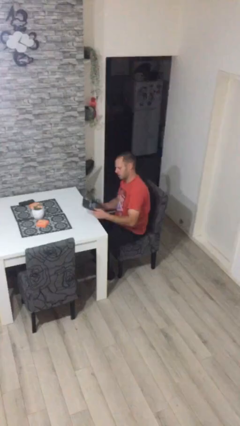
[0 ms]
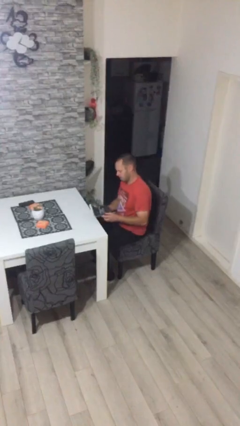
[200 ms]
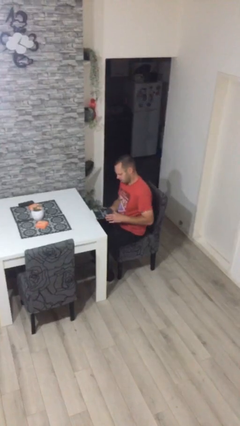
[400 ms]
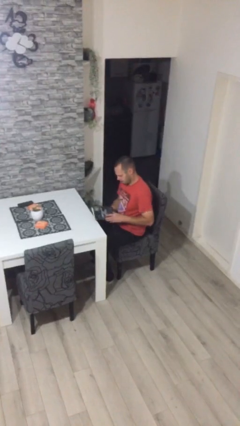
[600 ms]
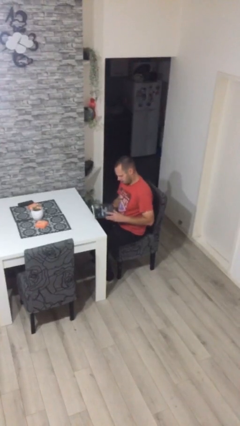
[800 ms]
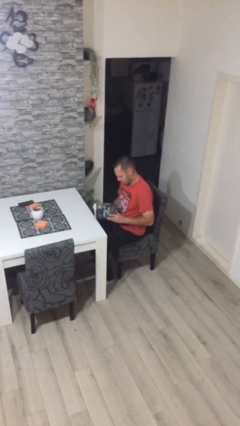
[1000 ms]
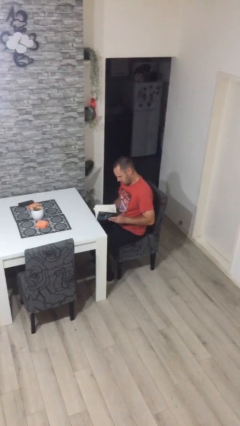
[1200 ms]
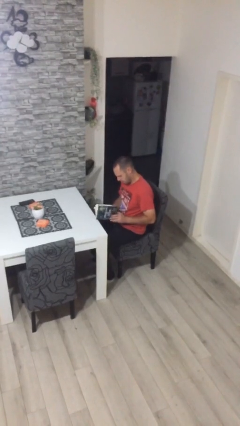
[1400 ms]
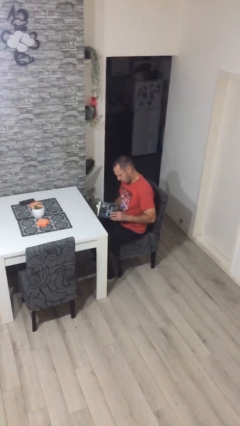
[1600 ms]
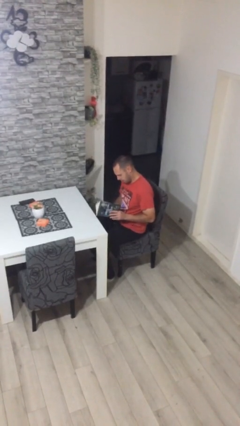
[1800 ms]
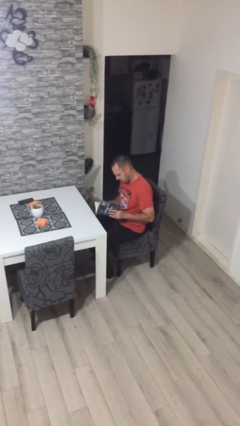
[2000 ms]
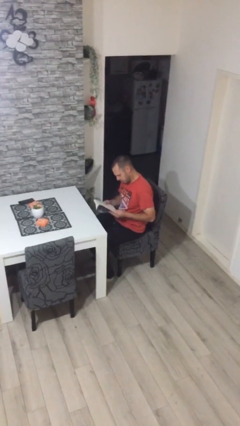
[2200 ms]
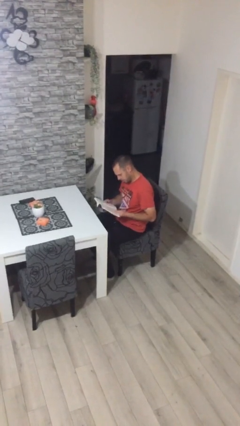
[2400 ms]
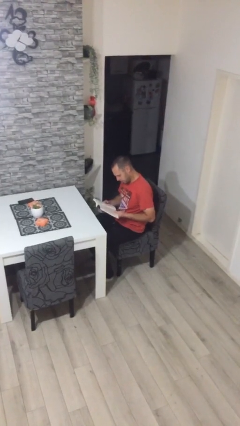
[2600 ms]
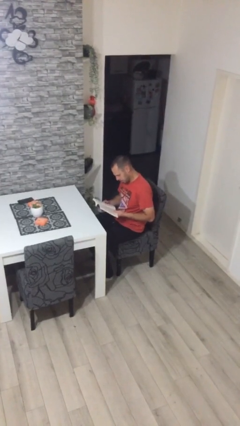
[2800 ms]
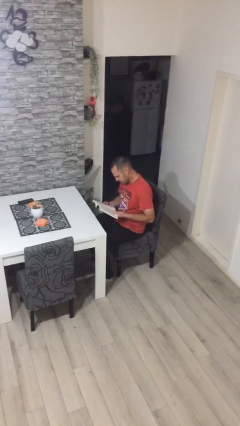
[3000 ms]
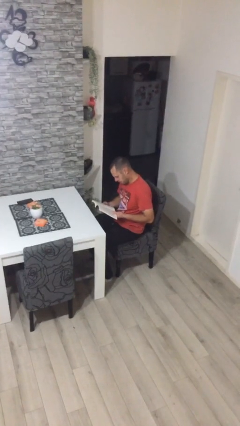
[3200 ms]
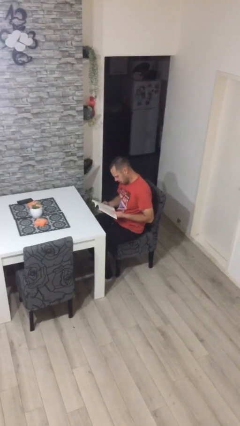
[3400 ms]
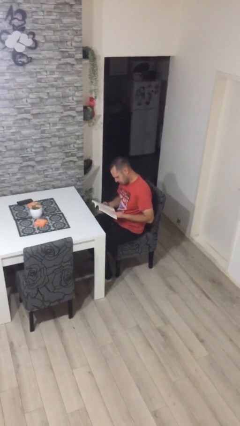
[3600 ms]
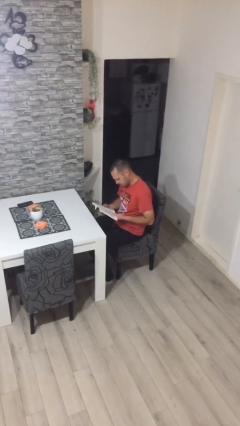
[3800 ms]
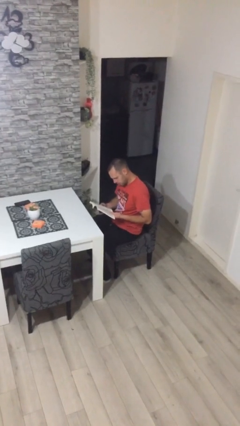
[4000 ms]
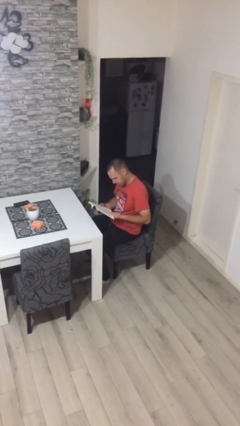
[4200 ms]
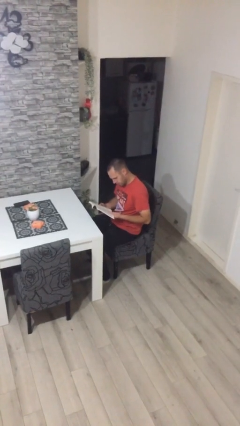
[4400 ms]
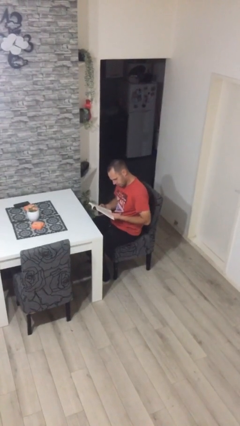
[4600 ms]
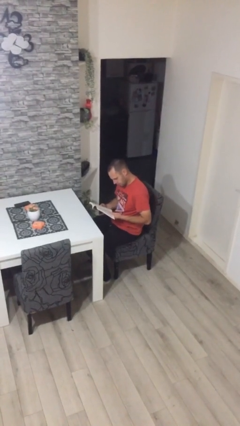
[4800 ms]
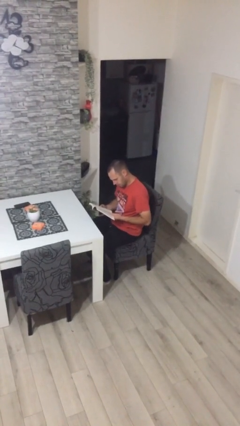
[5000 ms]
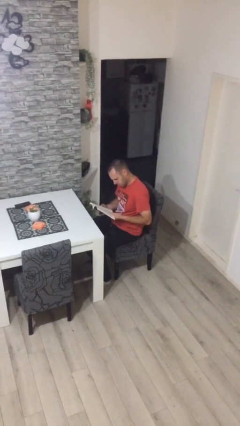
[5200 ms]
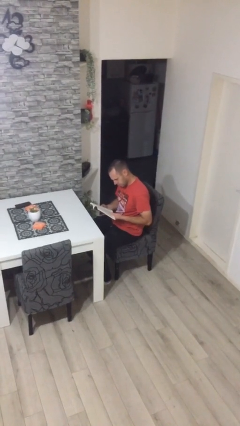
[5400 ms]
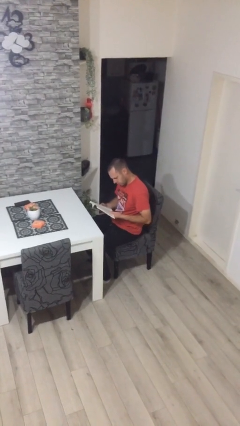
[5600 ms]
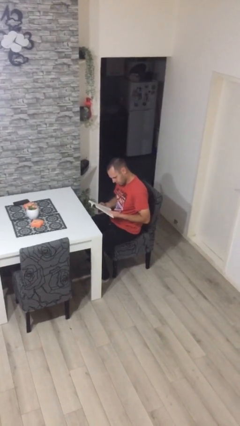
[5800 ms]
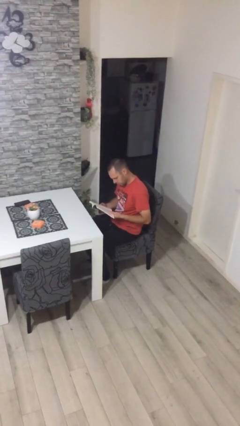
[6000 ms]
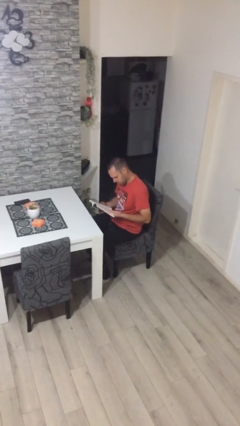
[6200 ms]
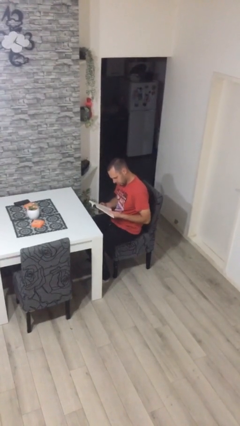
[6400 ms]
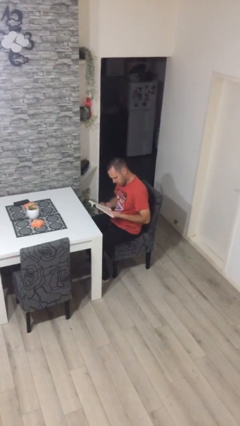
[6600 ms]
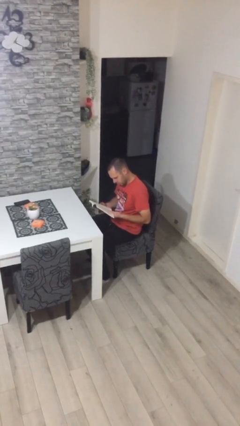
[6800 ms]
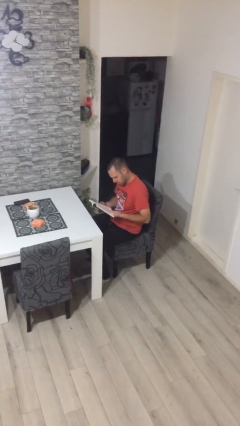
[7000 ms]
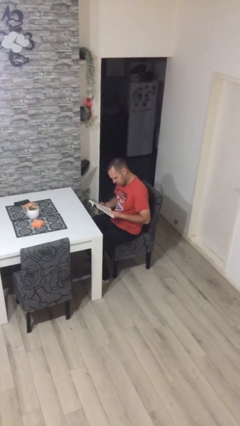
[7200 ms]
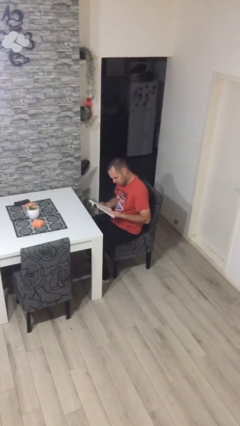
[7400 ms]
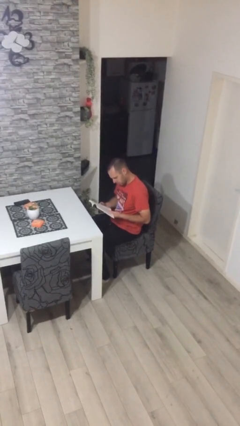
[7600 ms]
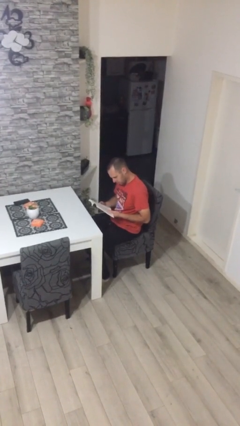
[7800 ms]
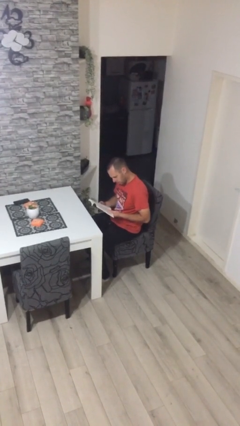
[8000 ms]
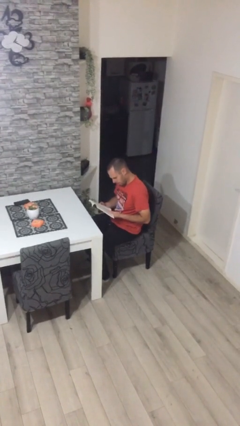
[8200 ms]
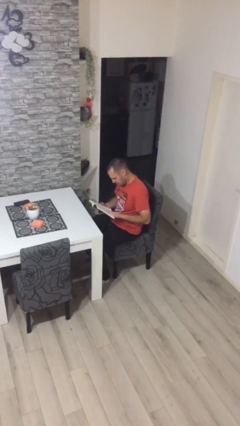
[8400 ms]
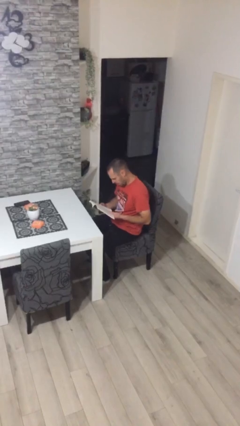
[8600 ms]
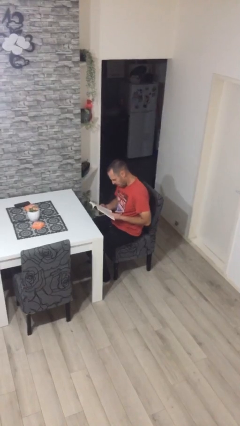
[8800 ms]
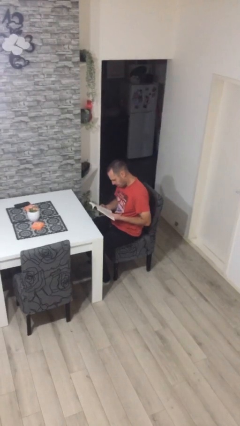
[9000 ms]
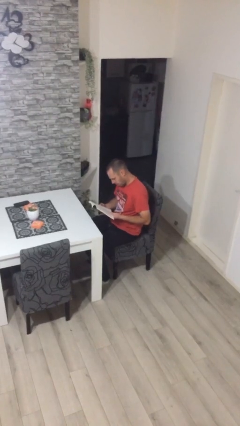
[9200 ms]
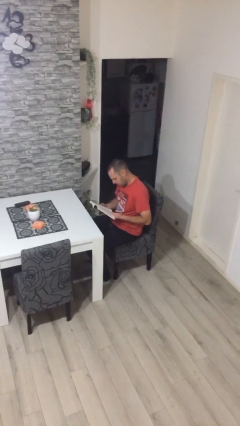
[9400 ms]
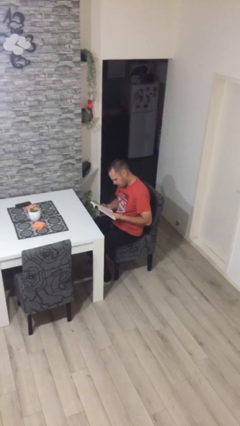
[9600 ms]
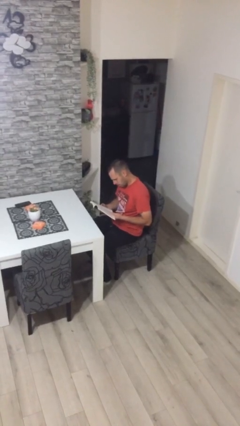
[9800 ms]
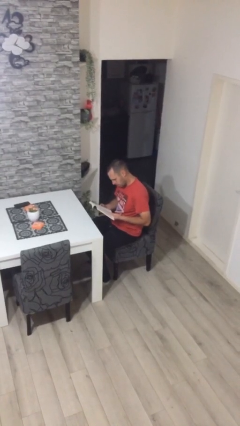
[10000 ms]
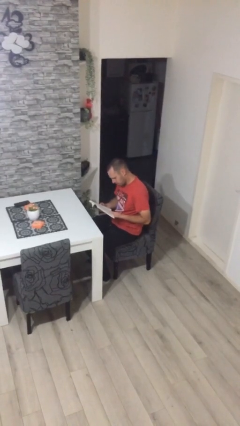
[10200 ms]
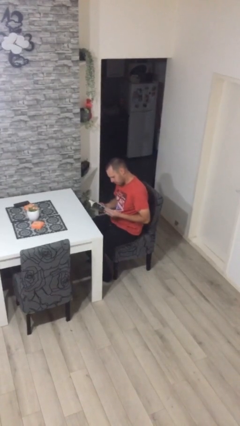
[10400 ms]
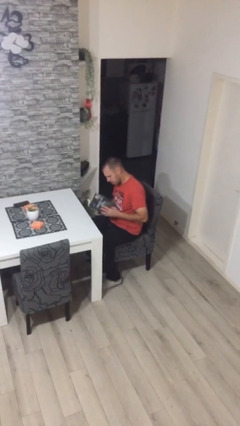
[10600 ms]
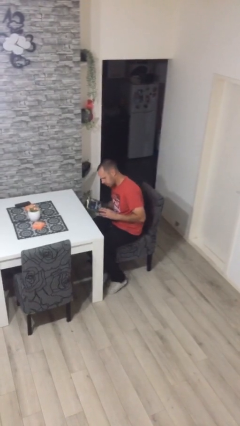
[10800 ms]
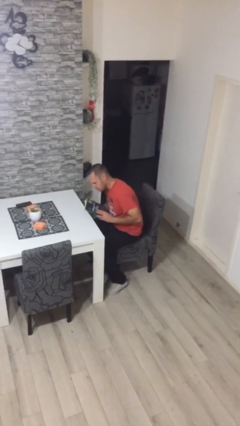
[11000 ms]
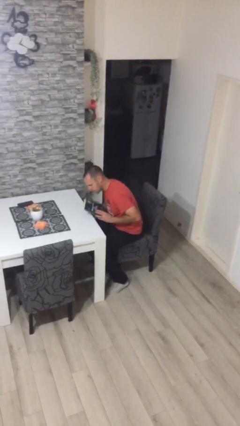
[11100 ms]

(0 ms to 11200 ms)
person reads document

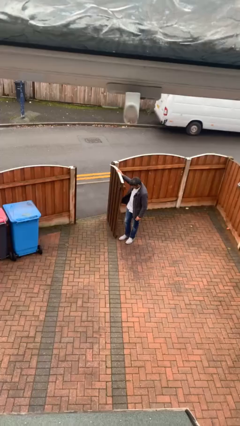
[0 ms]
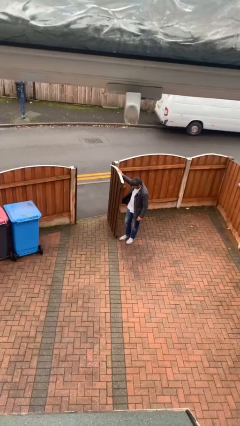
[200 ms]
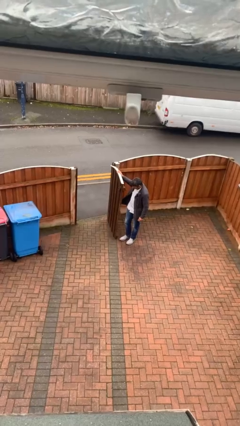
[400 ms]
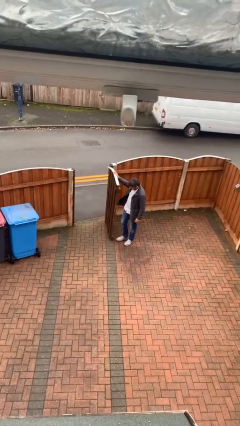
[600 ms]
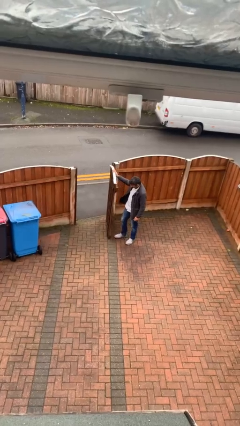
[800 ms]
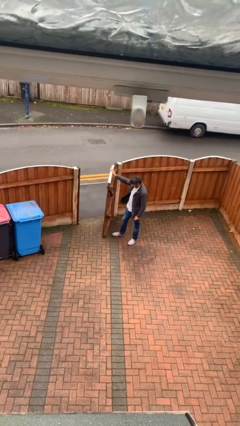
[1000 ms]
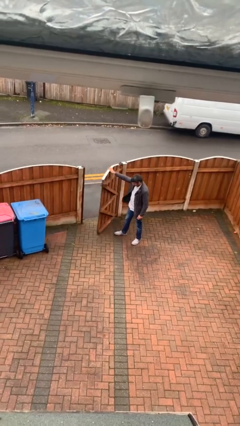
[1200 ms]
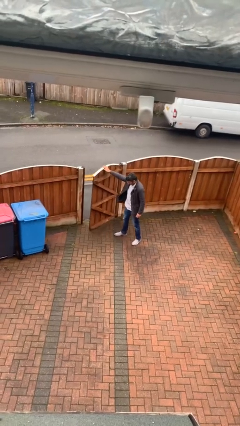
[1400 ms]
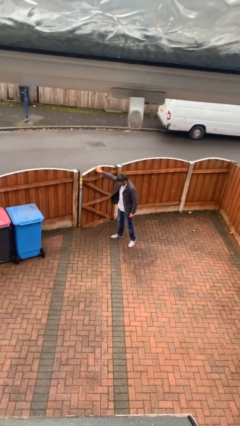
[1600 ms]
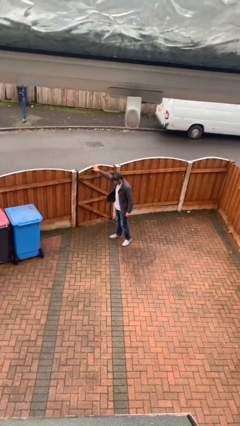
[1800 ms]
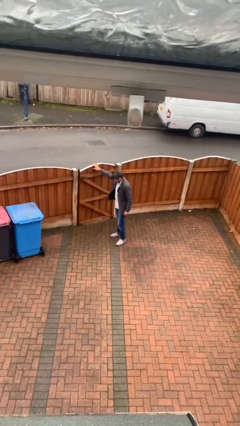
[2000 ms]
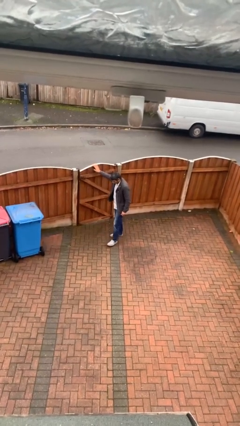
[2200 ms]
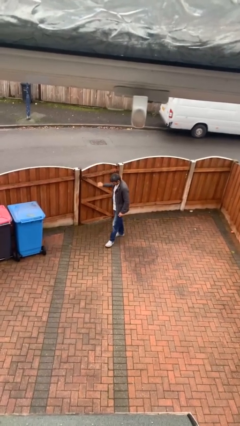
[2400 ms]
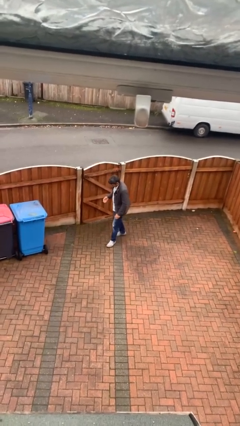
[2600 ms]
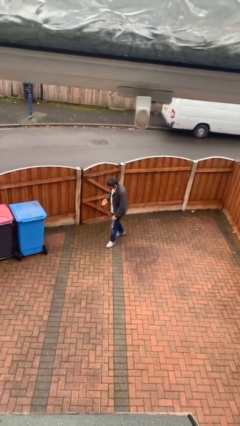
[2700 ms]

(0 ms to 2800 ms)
person closes facility door

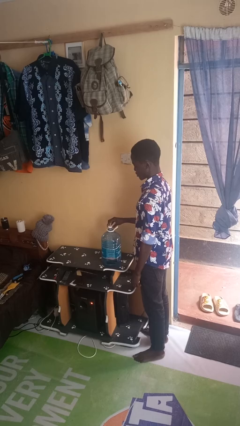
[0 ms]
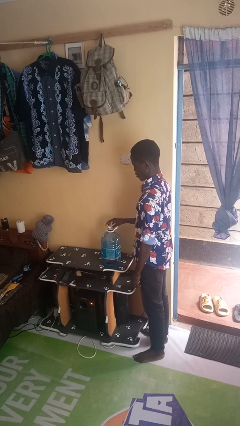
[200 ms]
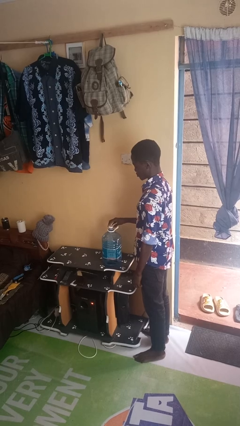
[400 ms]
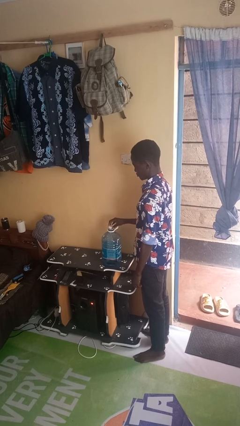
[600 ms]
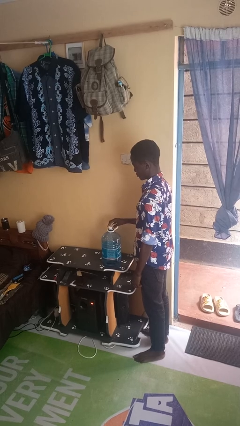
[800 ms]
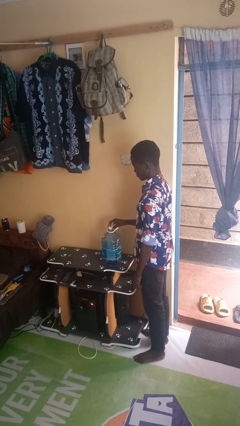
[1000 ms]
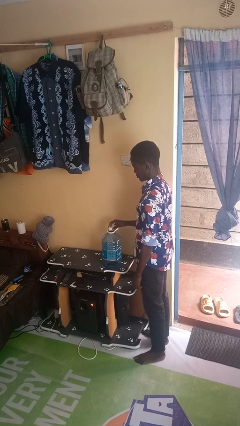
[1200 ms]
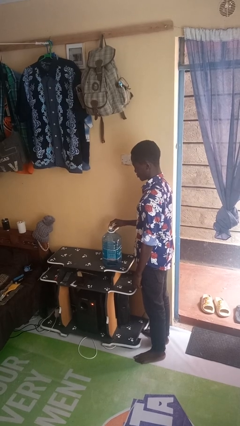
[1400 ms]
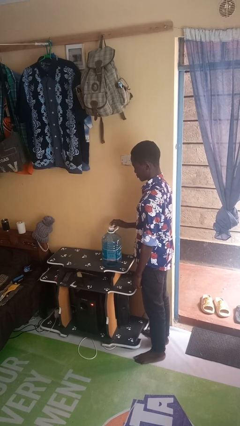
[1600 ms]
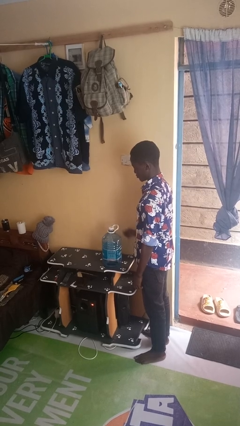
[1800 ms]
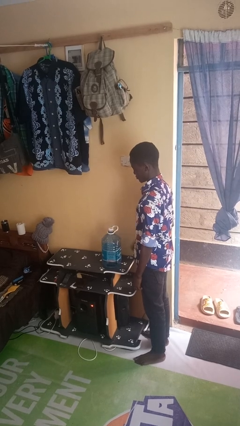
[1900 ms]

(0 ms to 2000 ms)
person screws lid to bottle

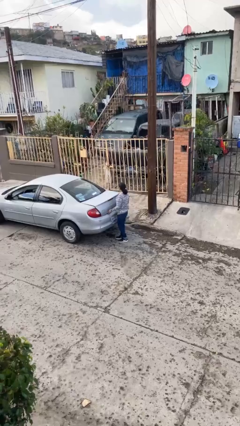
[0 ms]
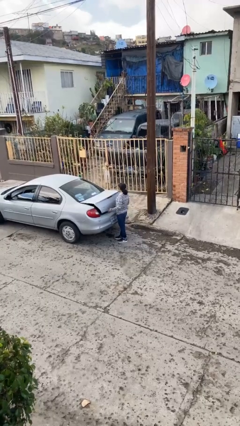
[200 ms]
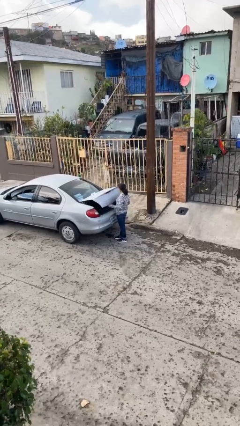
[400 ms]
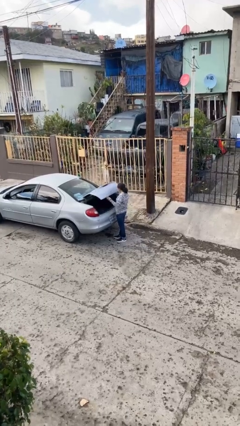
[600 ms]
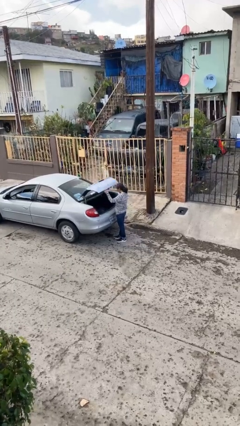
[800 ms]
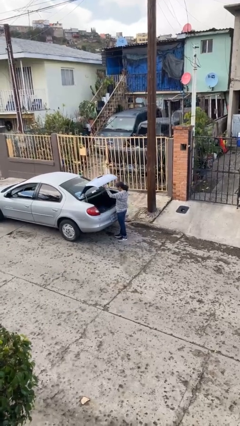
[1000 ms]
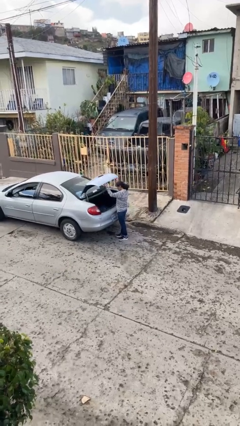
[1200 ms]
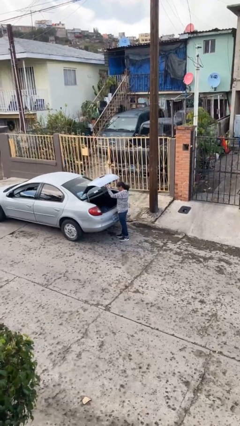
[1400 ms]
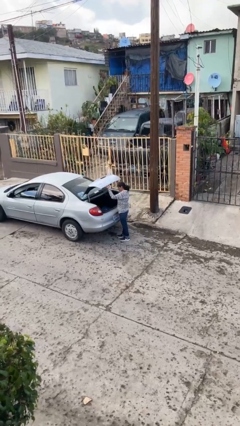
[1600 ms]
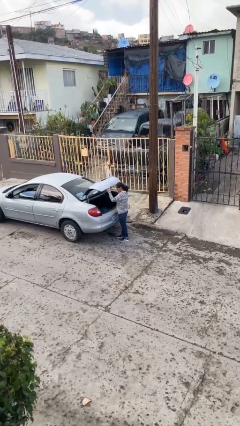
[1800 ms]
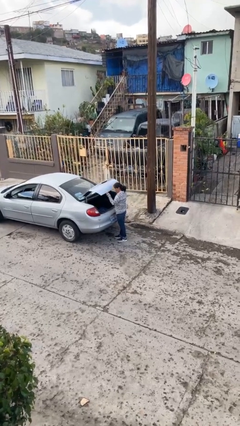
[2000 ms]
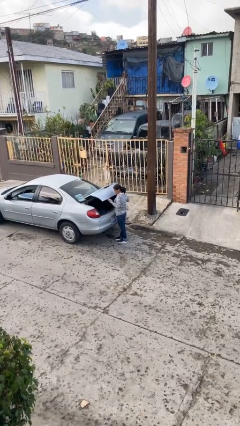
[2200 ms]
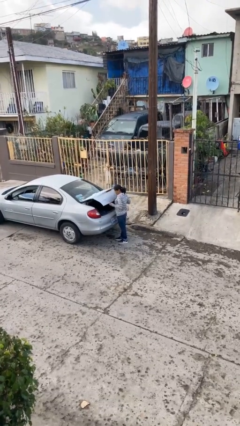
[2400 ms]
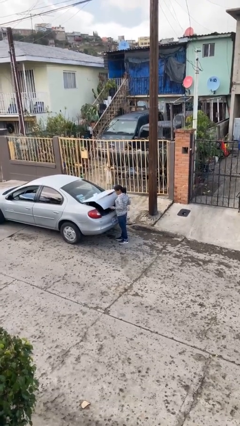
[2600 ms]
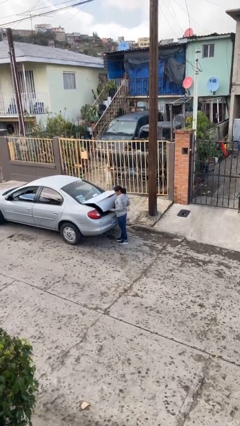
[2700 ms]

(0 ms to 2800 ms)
person opens car trunk
